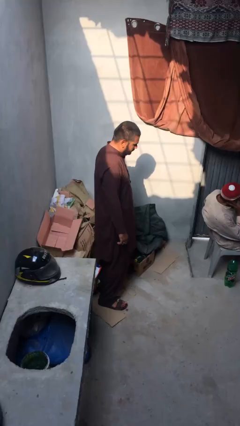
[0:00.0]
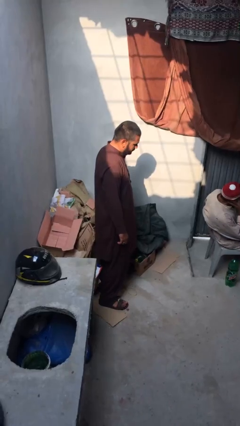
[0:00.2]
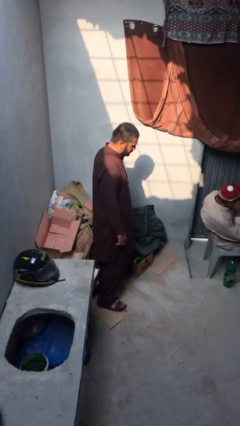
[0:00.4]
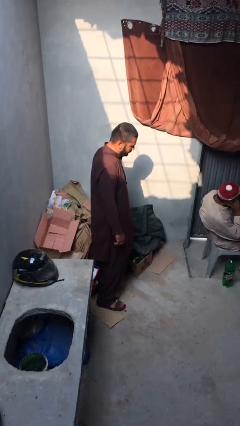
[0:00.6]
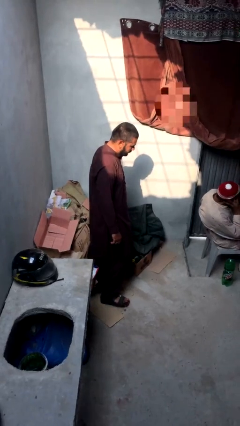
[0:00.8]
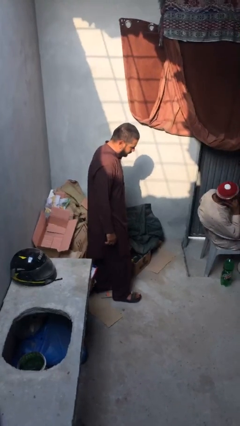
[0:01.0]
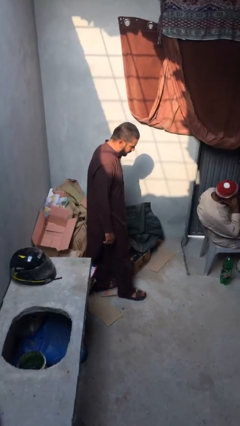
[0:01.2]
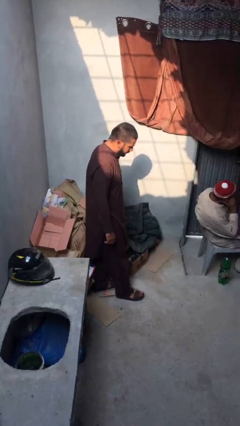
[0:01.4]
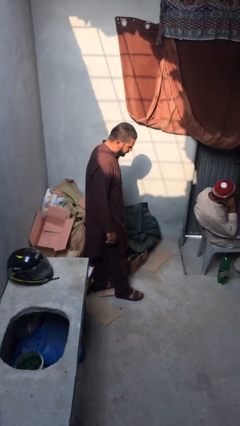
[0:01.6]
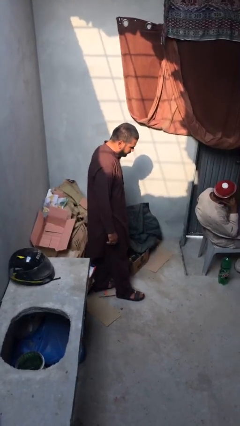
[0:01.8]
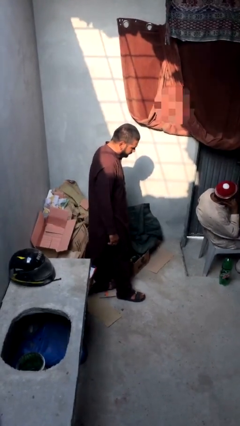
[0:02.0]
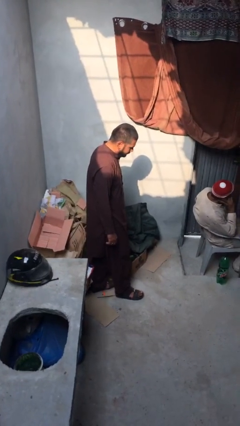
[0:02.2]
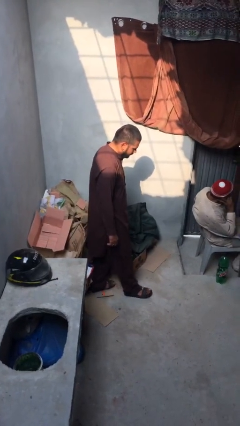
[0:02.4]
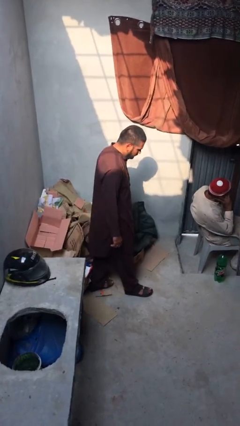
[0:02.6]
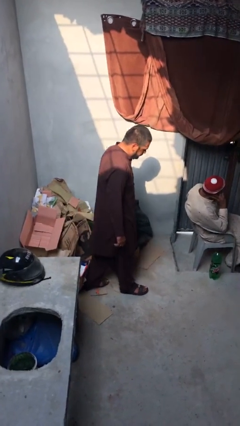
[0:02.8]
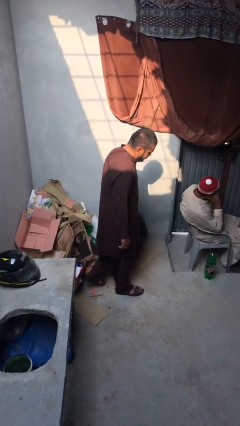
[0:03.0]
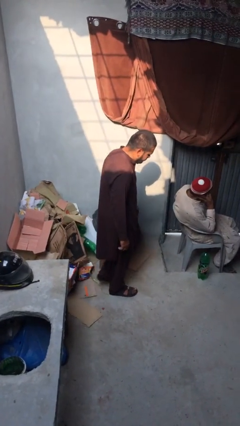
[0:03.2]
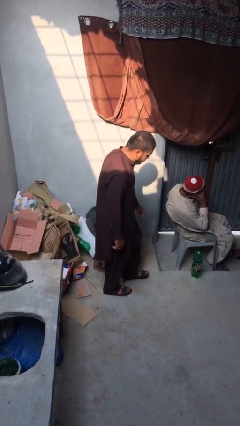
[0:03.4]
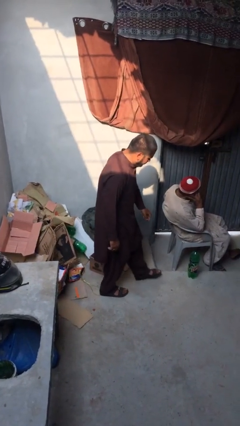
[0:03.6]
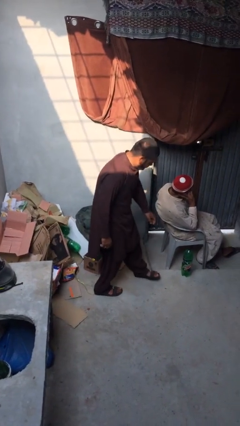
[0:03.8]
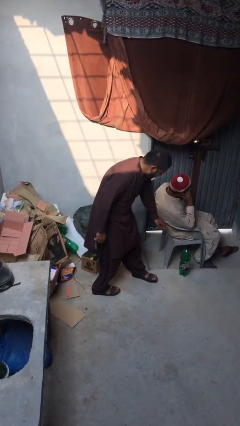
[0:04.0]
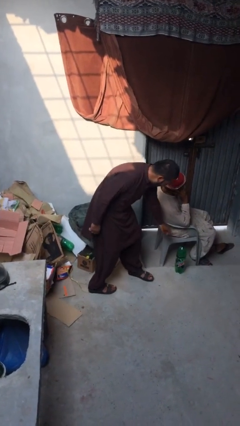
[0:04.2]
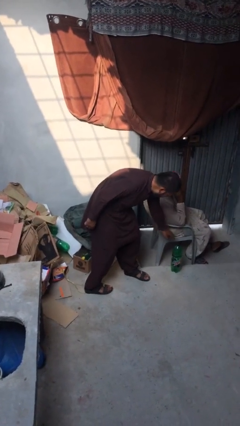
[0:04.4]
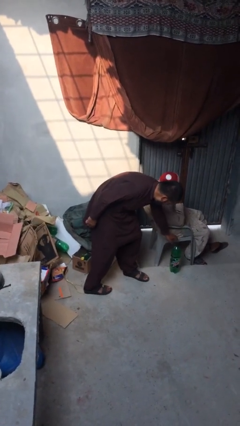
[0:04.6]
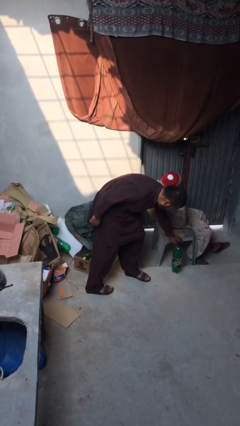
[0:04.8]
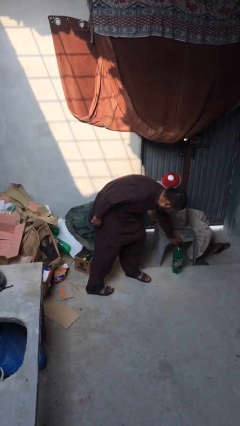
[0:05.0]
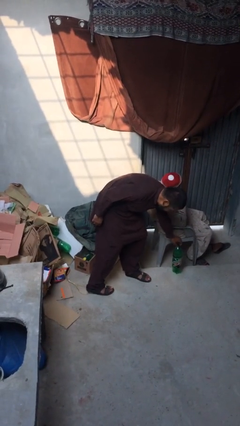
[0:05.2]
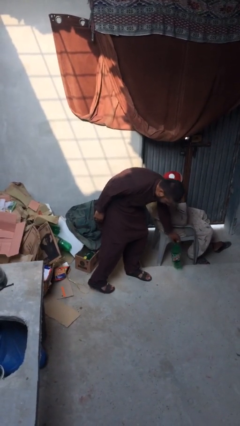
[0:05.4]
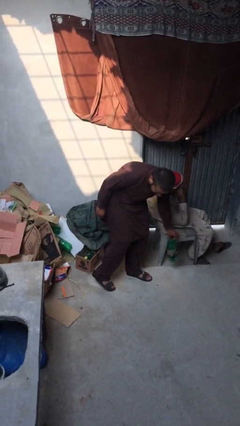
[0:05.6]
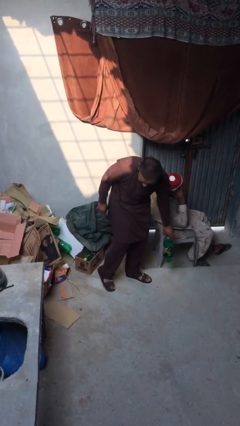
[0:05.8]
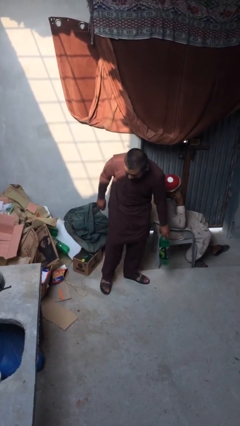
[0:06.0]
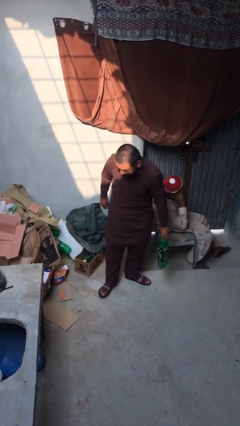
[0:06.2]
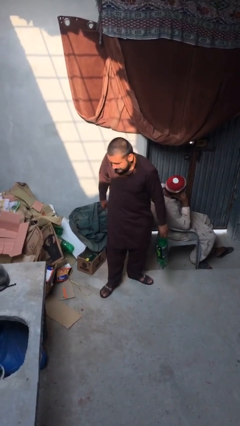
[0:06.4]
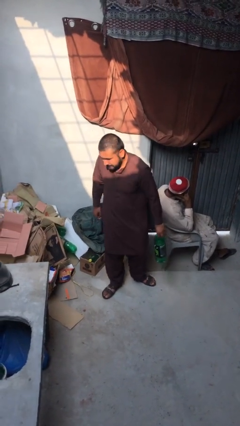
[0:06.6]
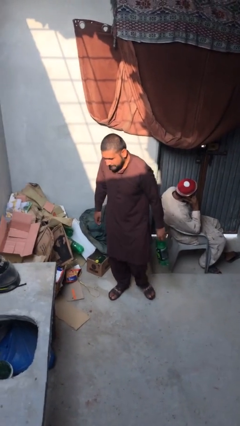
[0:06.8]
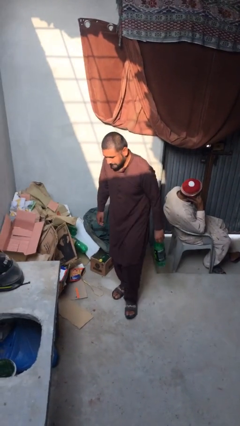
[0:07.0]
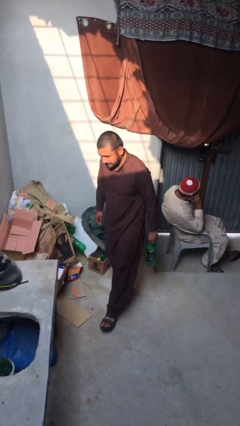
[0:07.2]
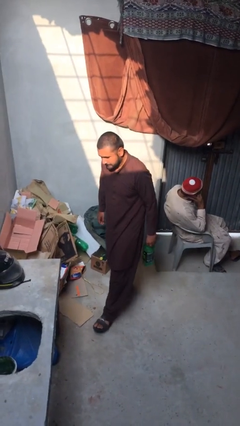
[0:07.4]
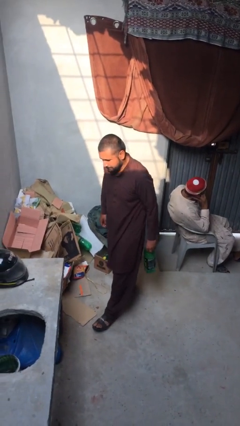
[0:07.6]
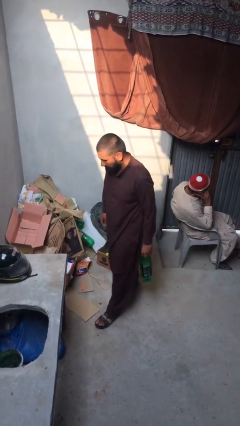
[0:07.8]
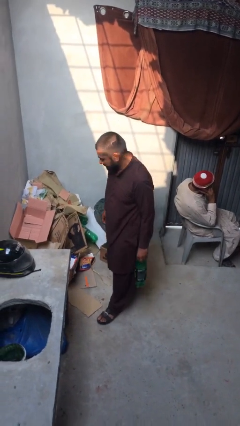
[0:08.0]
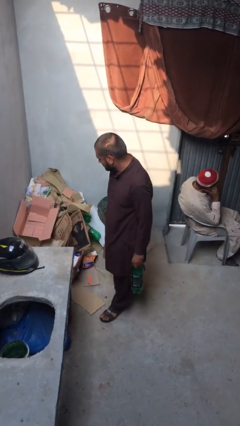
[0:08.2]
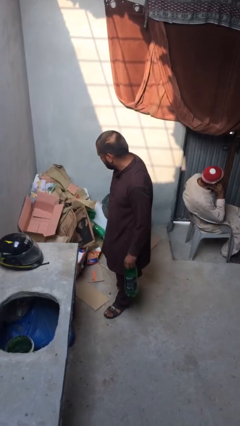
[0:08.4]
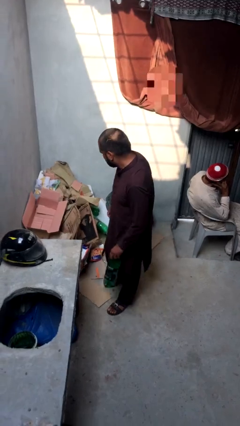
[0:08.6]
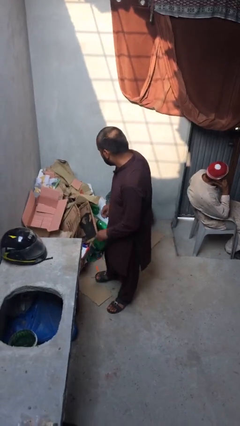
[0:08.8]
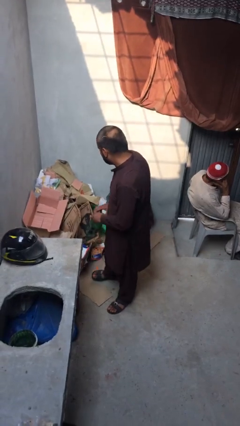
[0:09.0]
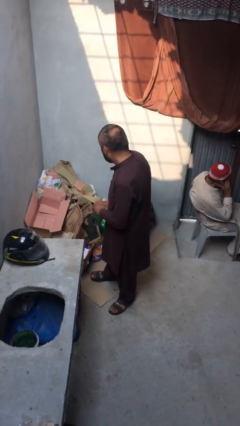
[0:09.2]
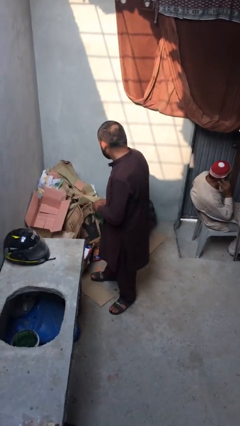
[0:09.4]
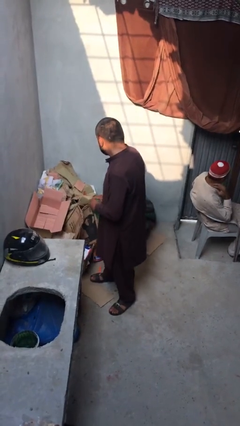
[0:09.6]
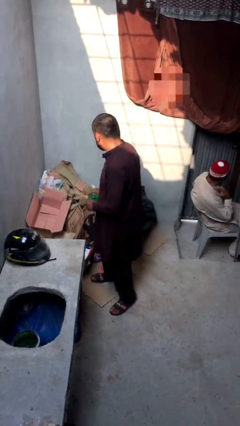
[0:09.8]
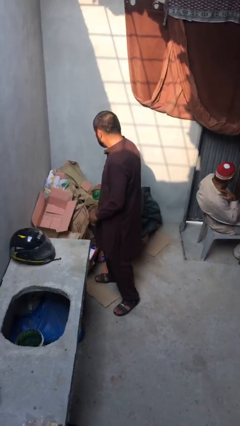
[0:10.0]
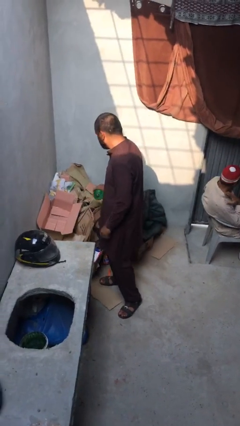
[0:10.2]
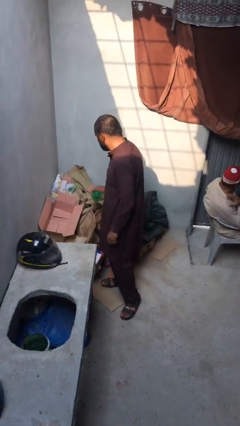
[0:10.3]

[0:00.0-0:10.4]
person steals object from person

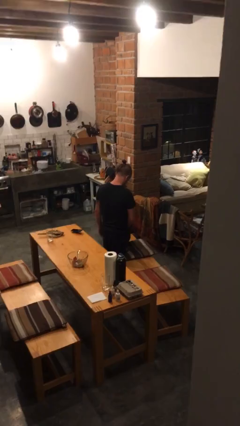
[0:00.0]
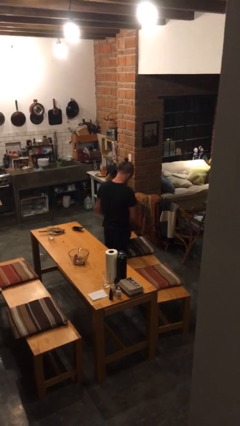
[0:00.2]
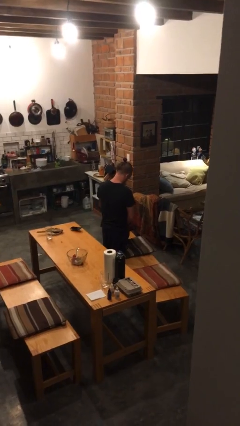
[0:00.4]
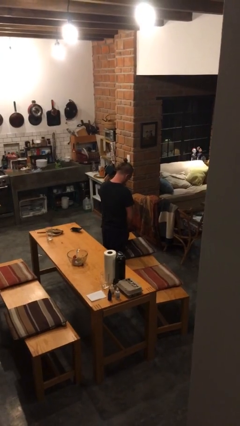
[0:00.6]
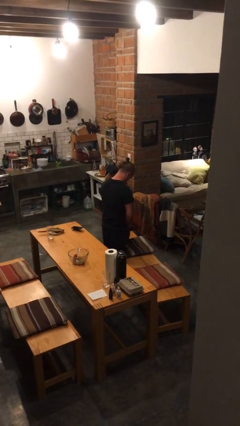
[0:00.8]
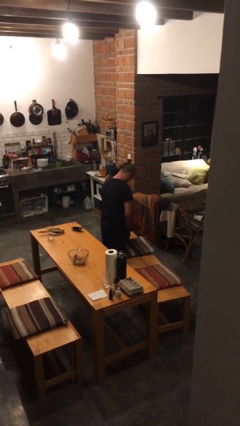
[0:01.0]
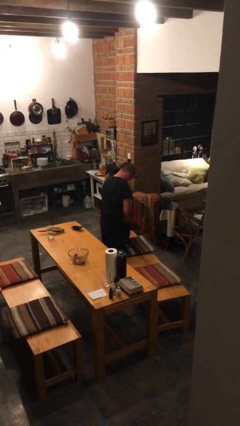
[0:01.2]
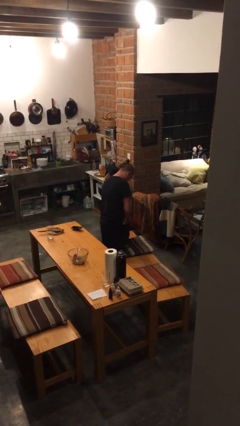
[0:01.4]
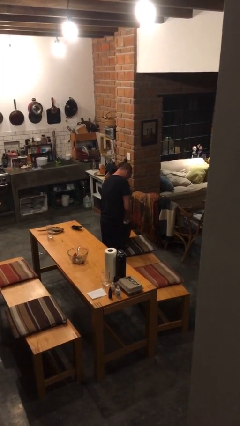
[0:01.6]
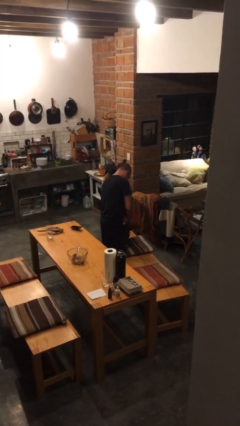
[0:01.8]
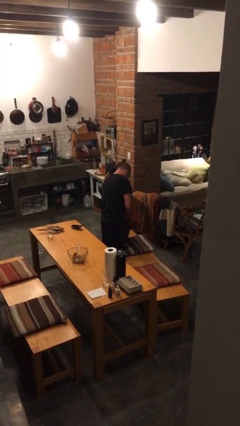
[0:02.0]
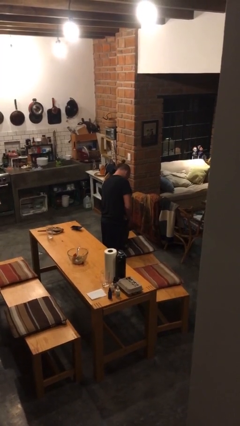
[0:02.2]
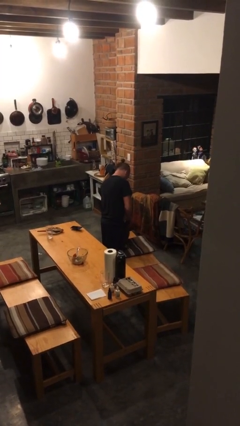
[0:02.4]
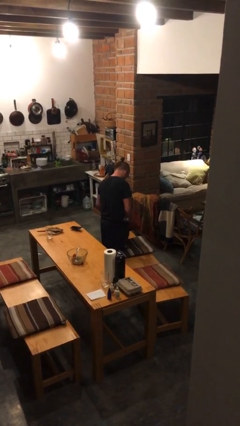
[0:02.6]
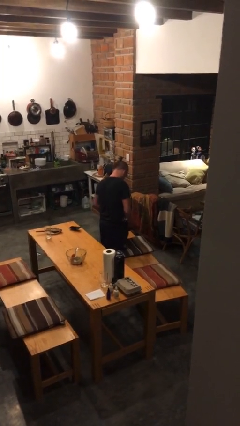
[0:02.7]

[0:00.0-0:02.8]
person searches in bag

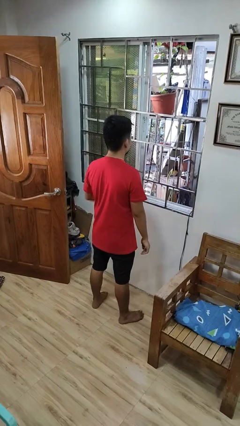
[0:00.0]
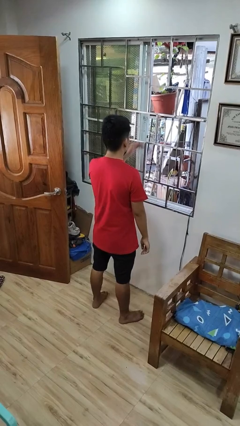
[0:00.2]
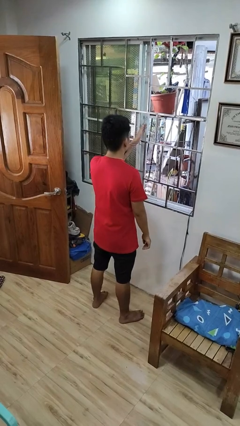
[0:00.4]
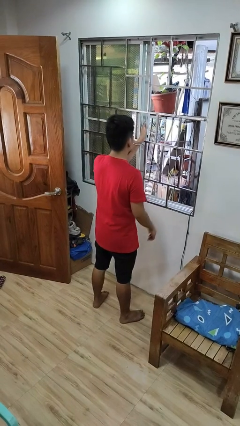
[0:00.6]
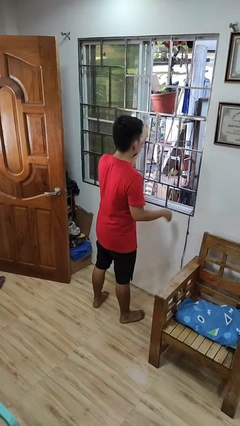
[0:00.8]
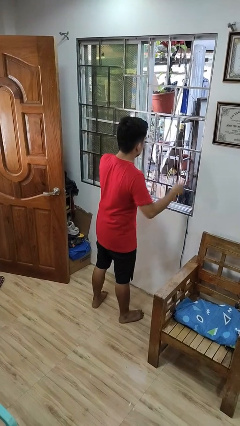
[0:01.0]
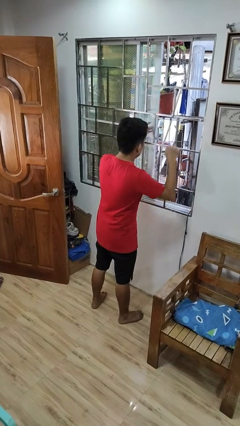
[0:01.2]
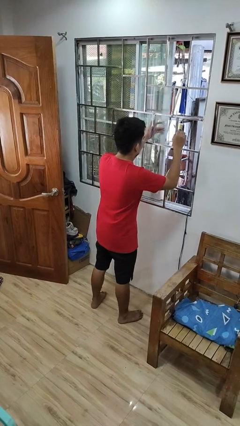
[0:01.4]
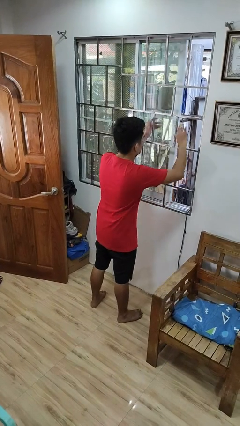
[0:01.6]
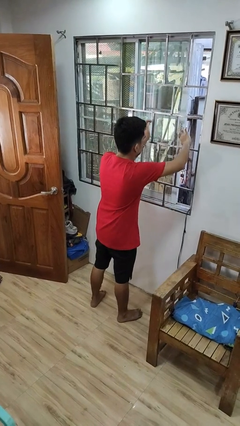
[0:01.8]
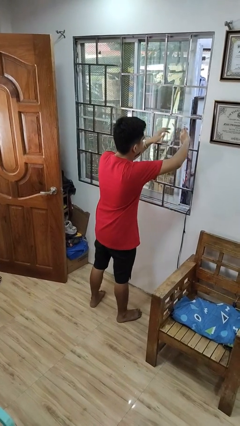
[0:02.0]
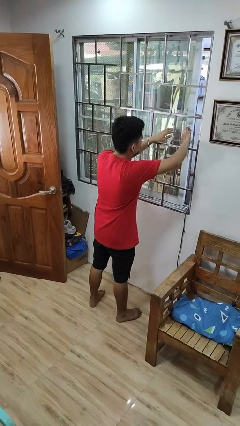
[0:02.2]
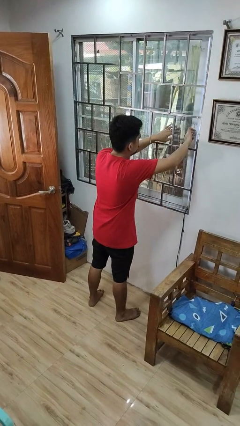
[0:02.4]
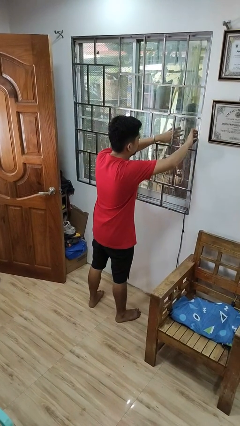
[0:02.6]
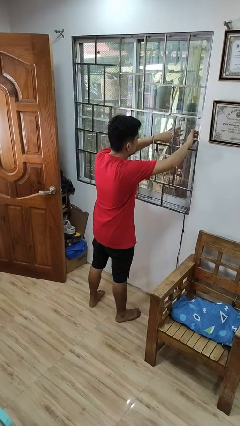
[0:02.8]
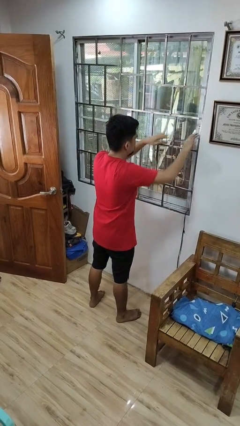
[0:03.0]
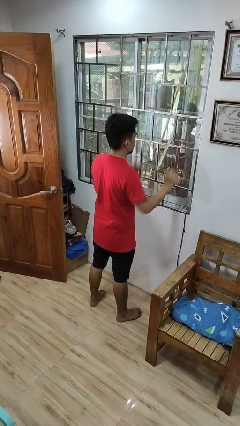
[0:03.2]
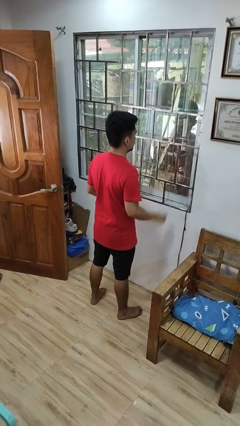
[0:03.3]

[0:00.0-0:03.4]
person closes home window

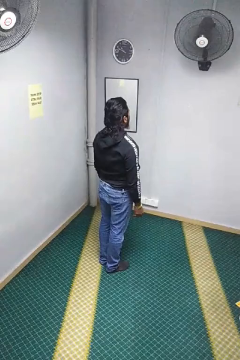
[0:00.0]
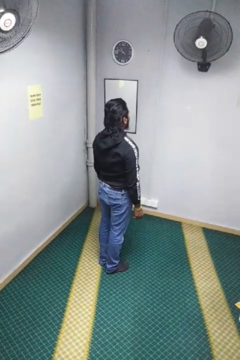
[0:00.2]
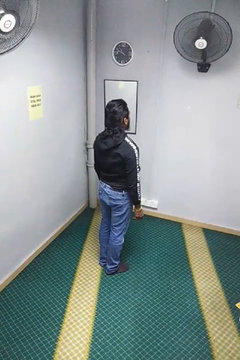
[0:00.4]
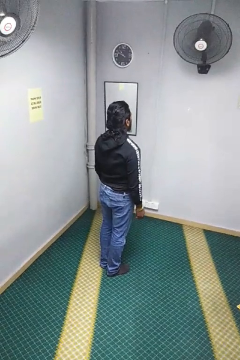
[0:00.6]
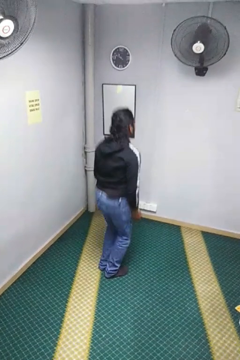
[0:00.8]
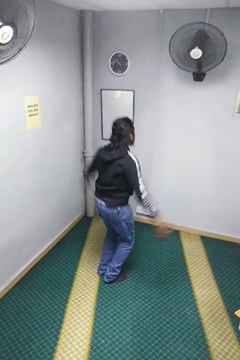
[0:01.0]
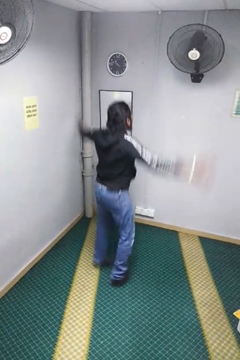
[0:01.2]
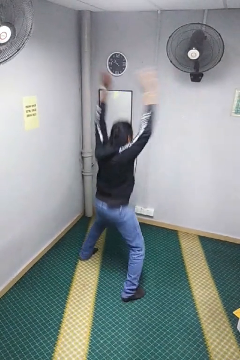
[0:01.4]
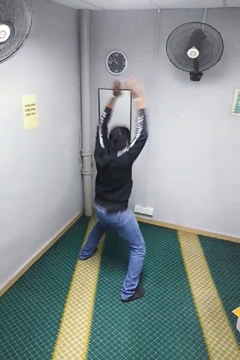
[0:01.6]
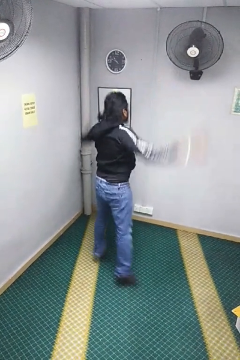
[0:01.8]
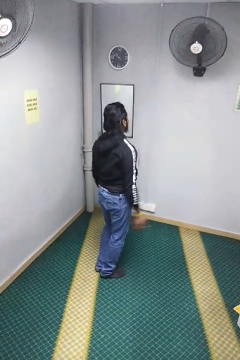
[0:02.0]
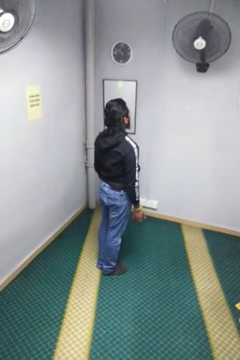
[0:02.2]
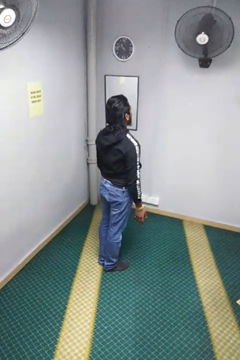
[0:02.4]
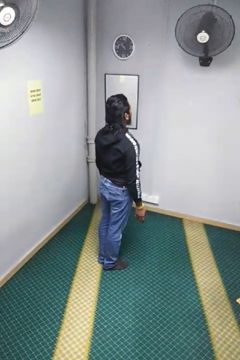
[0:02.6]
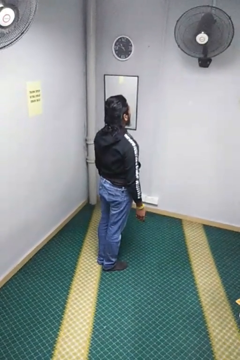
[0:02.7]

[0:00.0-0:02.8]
person exercises with jumping jacks
